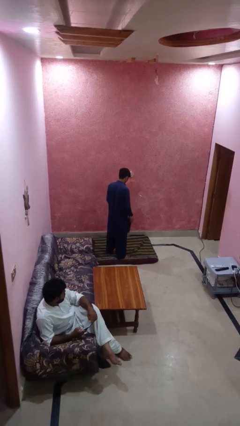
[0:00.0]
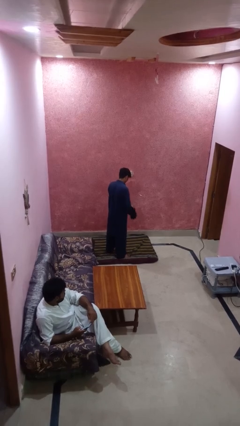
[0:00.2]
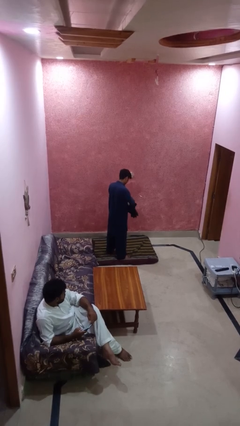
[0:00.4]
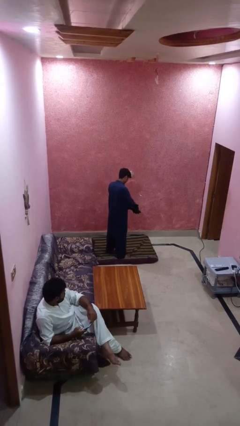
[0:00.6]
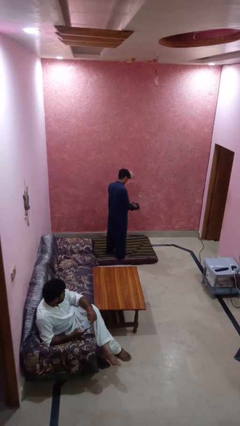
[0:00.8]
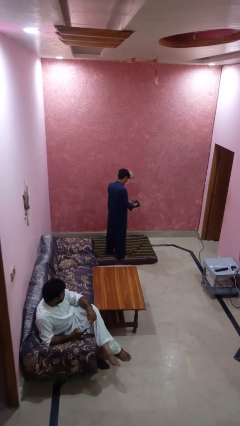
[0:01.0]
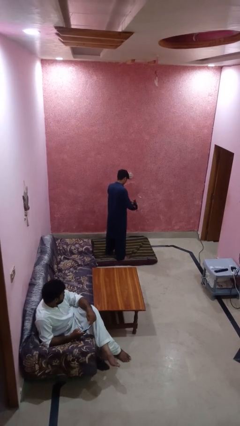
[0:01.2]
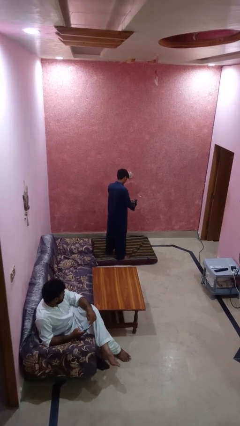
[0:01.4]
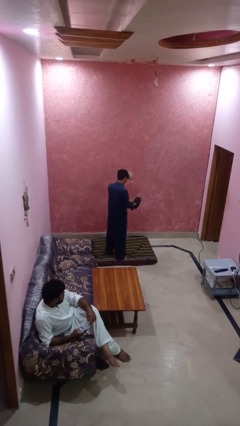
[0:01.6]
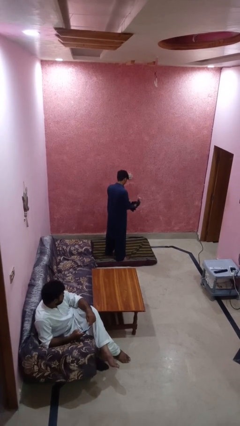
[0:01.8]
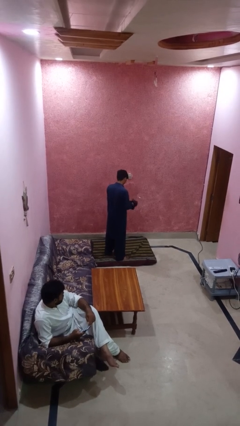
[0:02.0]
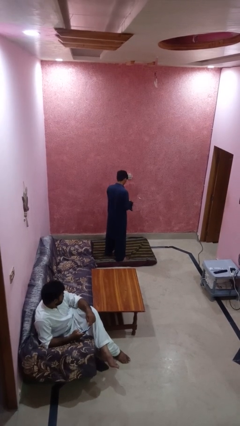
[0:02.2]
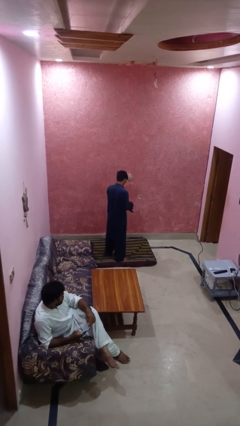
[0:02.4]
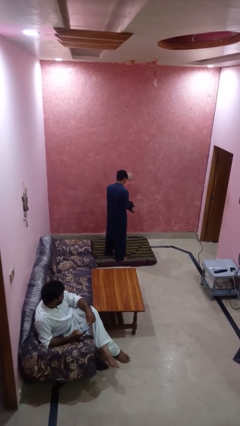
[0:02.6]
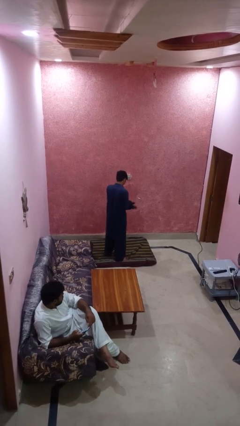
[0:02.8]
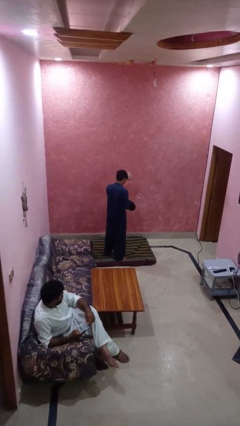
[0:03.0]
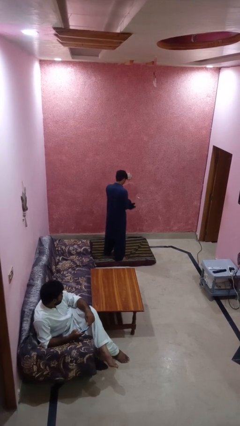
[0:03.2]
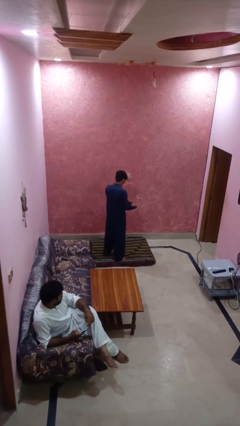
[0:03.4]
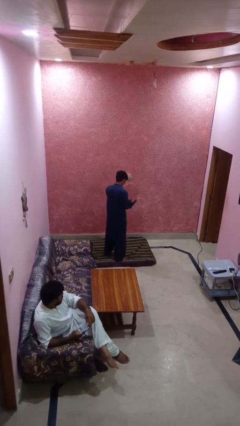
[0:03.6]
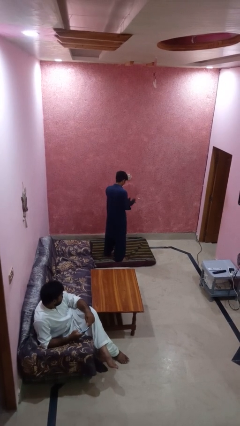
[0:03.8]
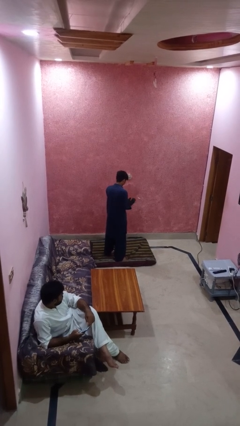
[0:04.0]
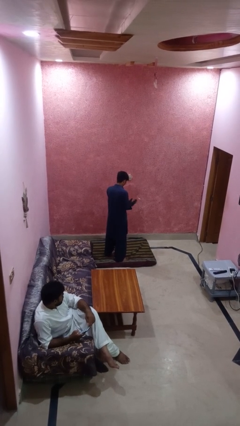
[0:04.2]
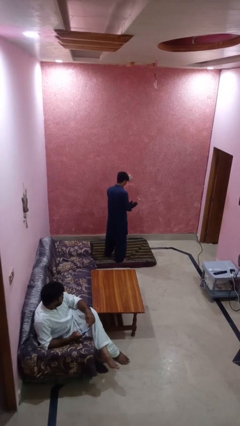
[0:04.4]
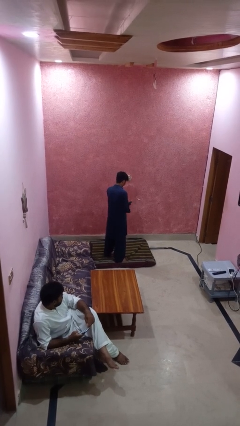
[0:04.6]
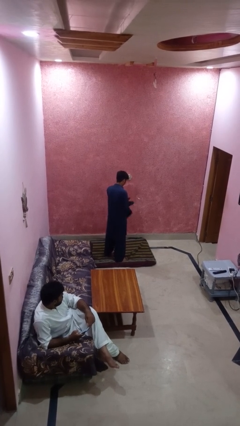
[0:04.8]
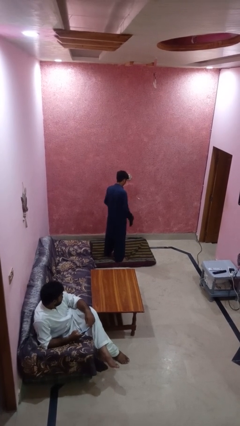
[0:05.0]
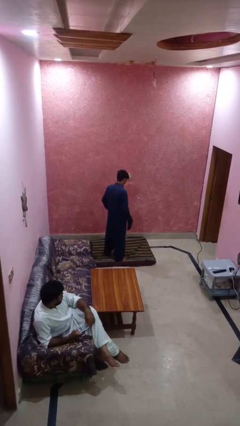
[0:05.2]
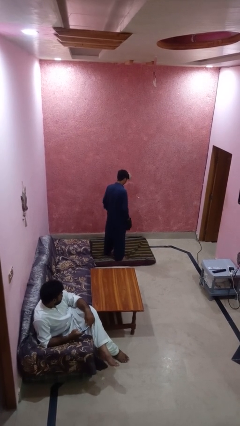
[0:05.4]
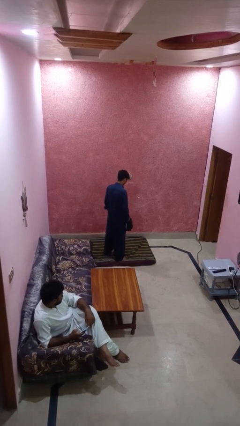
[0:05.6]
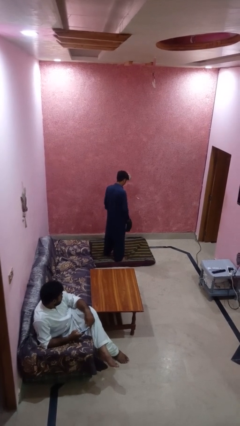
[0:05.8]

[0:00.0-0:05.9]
person puts on gloves

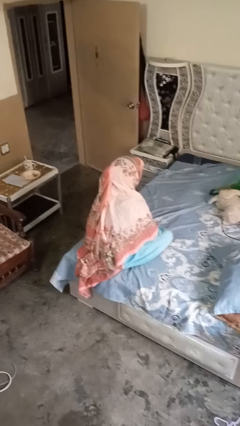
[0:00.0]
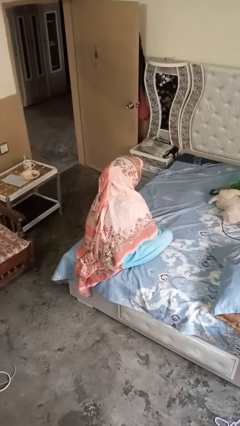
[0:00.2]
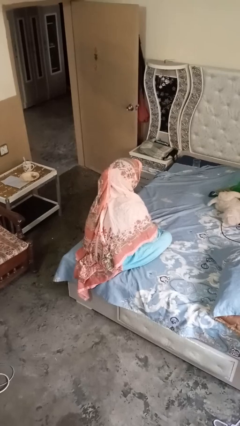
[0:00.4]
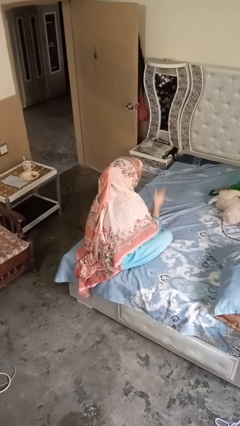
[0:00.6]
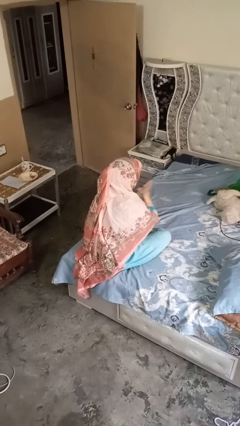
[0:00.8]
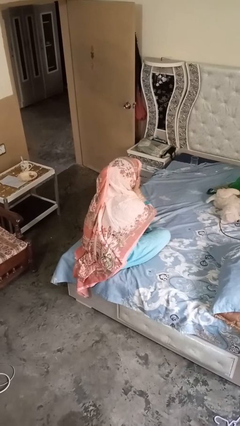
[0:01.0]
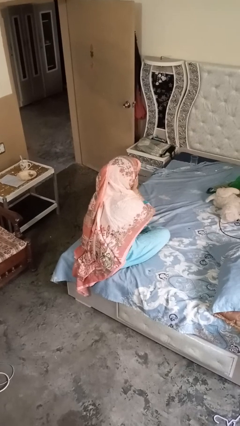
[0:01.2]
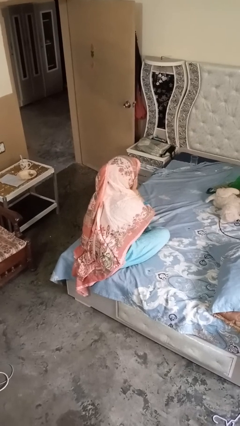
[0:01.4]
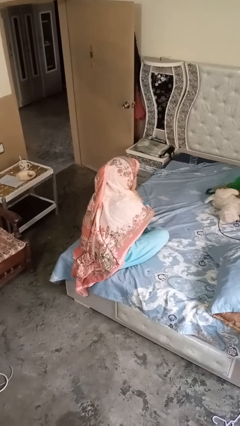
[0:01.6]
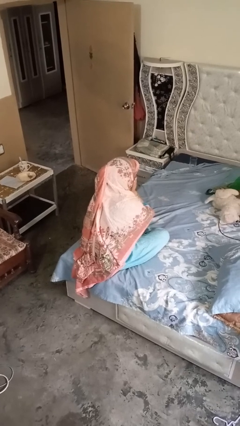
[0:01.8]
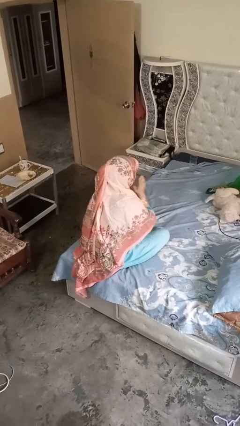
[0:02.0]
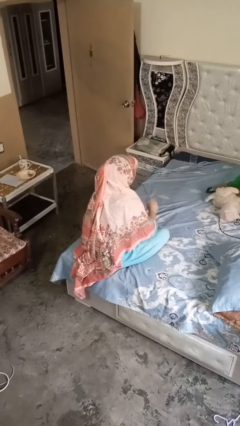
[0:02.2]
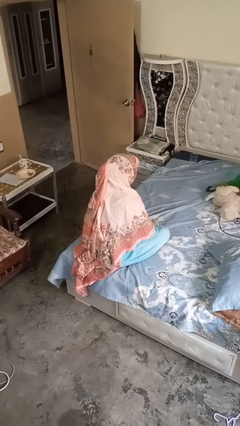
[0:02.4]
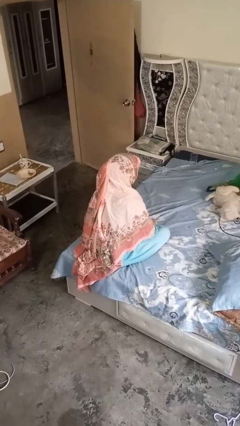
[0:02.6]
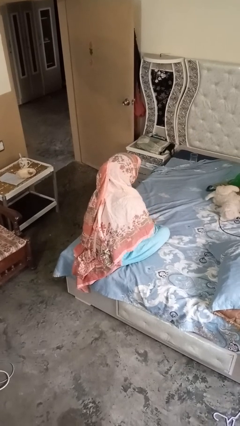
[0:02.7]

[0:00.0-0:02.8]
person strokes chin

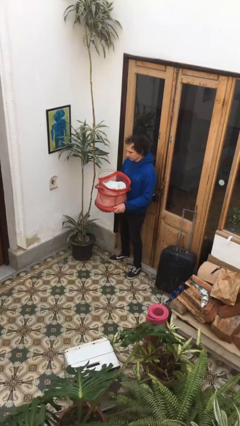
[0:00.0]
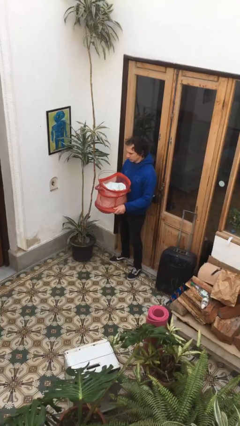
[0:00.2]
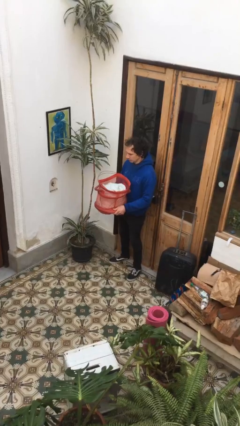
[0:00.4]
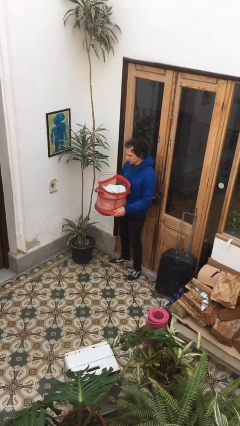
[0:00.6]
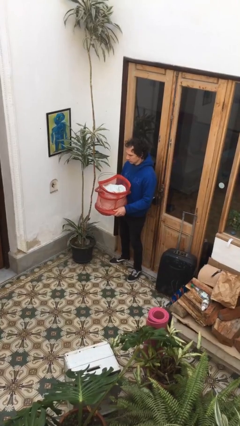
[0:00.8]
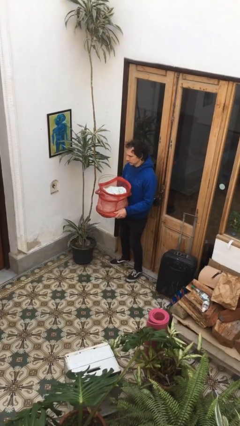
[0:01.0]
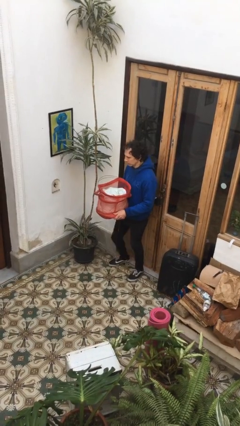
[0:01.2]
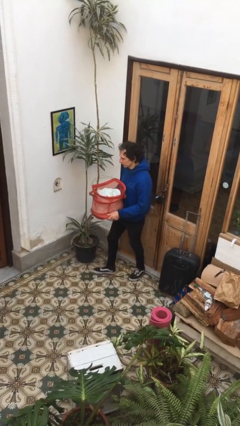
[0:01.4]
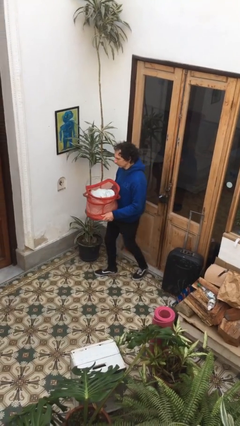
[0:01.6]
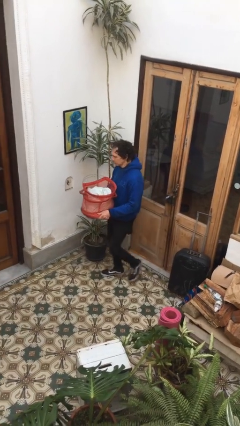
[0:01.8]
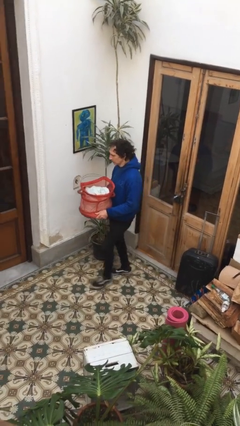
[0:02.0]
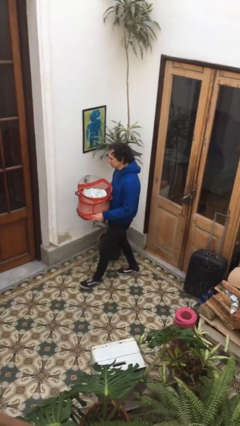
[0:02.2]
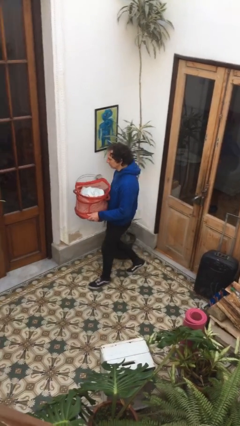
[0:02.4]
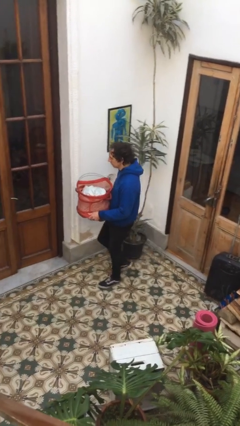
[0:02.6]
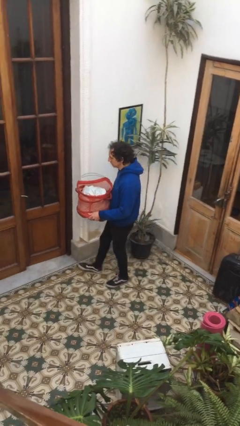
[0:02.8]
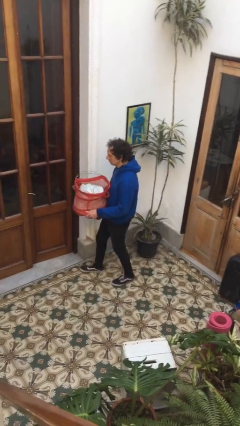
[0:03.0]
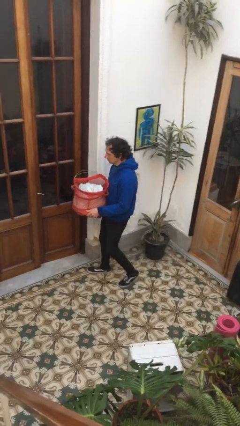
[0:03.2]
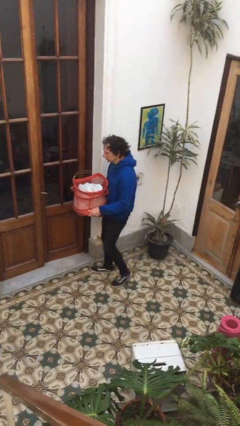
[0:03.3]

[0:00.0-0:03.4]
person carries laundry basket

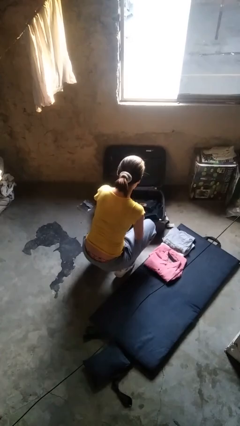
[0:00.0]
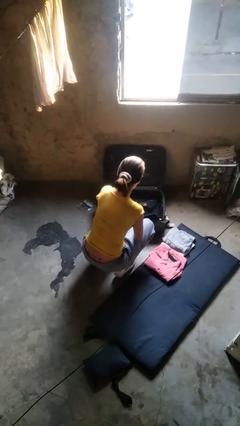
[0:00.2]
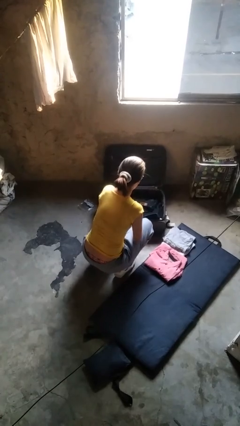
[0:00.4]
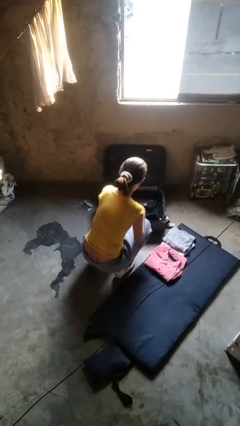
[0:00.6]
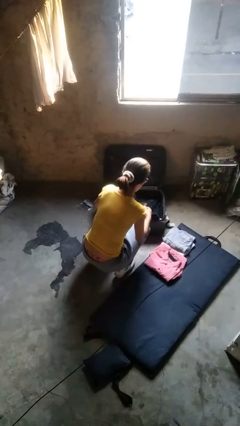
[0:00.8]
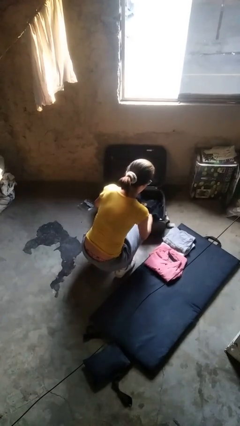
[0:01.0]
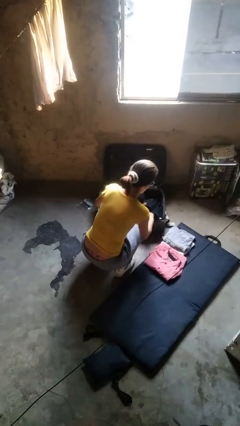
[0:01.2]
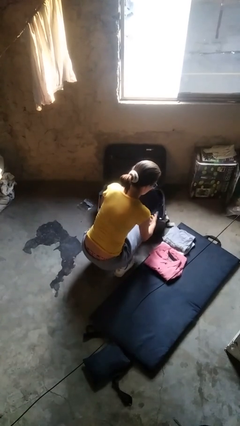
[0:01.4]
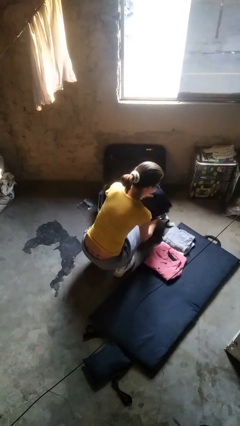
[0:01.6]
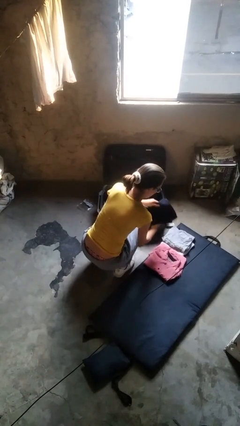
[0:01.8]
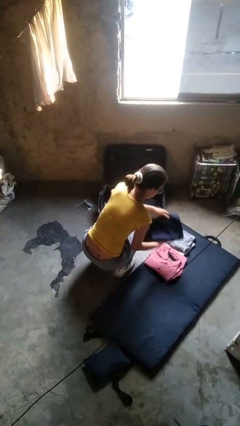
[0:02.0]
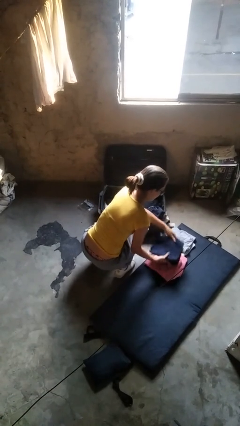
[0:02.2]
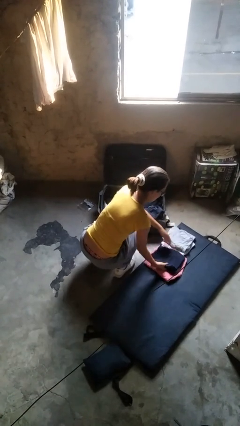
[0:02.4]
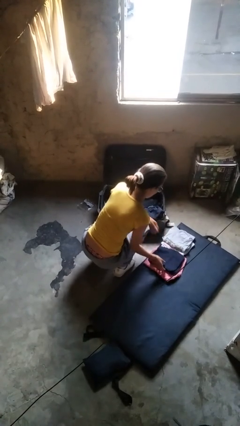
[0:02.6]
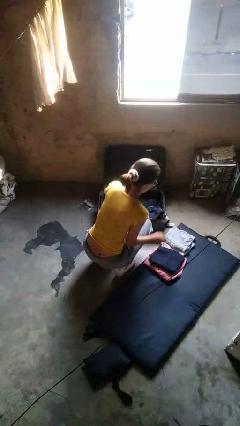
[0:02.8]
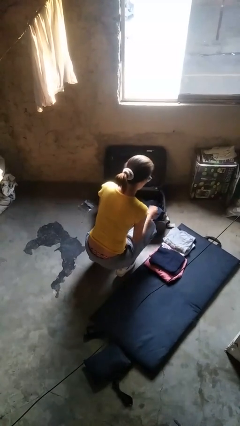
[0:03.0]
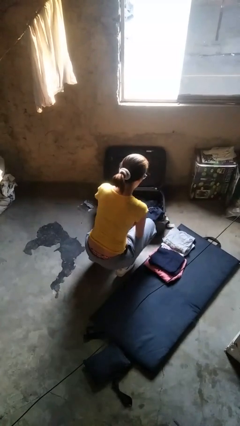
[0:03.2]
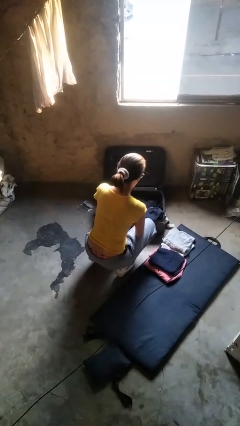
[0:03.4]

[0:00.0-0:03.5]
person unloads clothes from suitcase

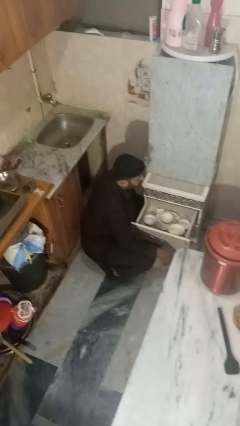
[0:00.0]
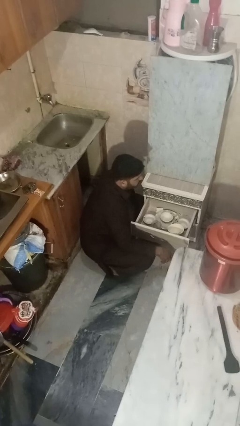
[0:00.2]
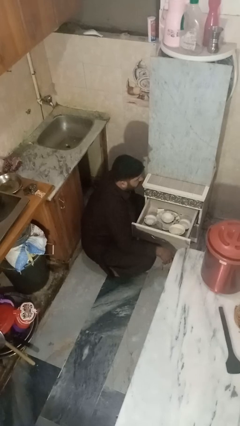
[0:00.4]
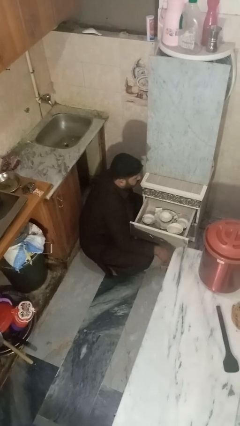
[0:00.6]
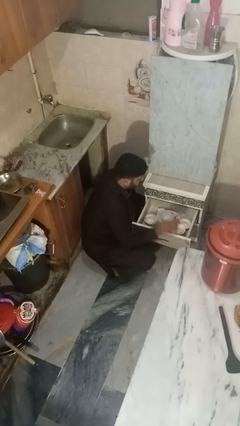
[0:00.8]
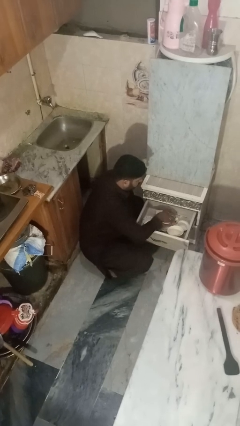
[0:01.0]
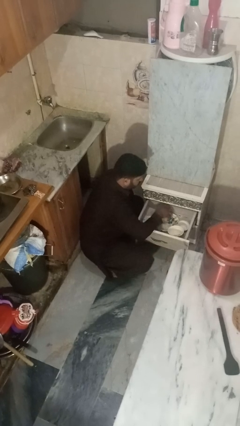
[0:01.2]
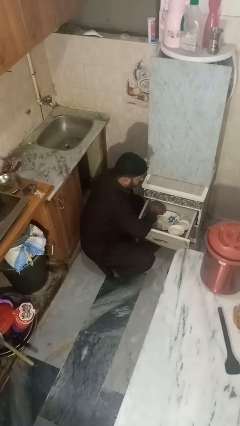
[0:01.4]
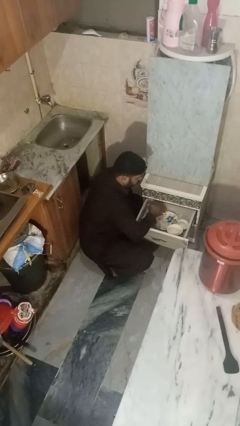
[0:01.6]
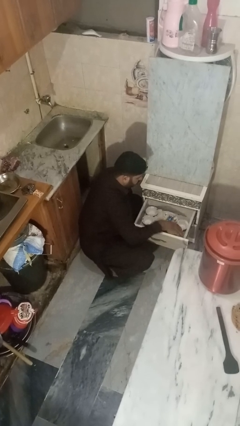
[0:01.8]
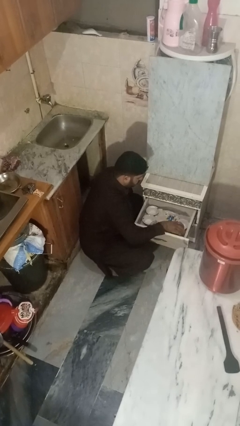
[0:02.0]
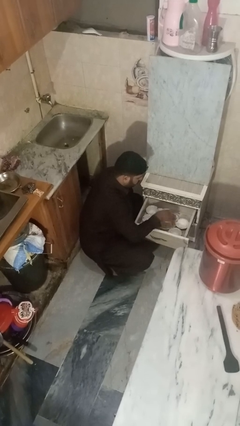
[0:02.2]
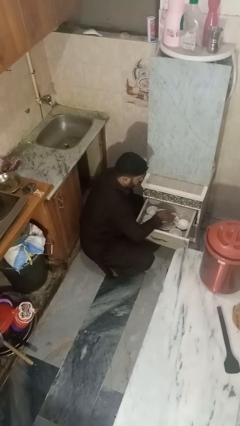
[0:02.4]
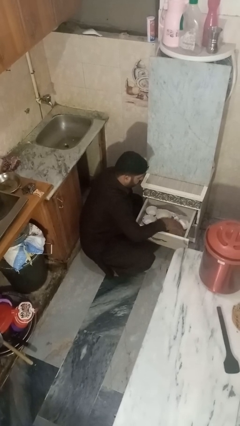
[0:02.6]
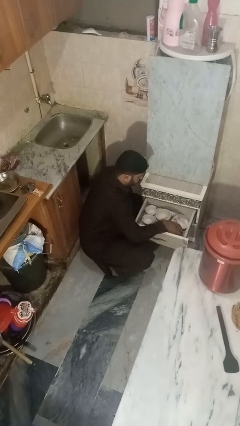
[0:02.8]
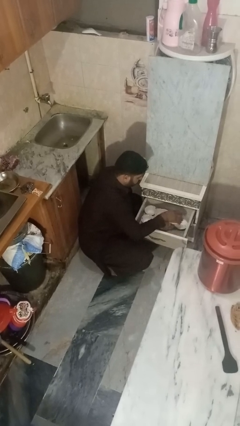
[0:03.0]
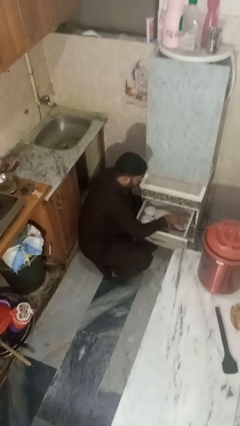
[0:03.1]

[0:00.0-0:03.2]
person searches in kitchen drawer
